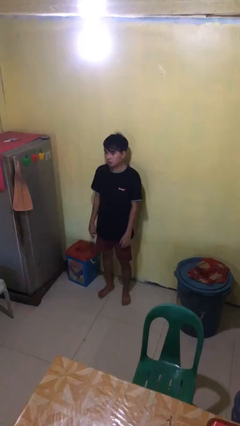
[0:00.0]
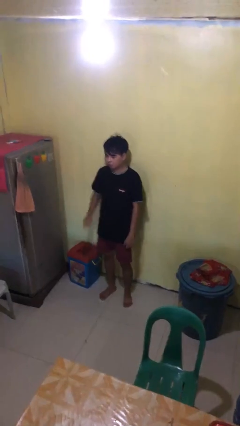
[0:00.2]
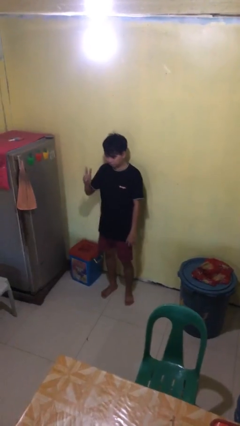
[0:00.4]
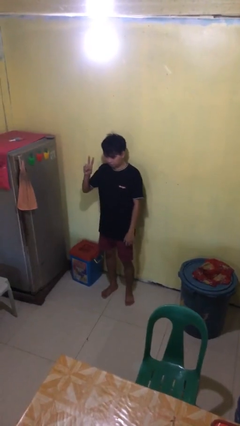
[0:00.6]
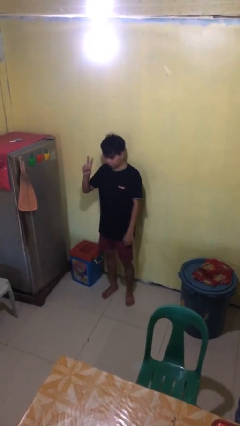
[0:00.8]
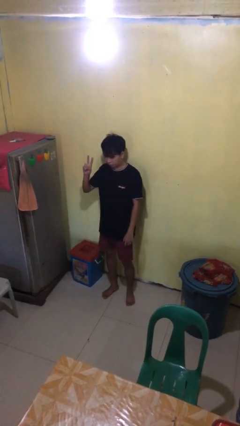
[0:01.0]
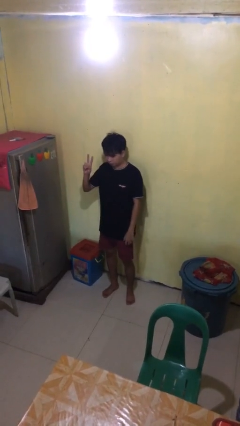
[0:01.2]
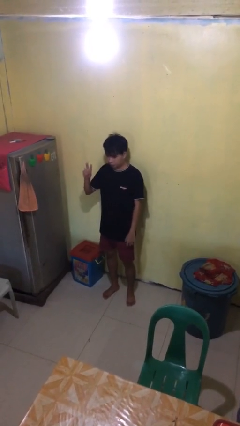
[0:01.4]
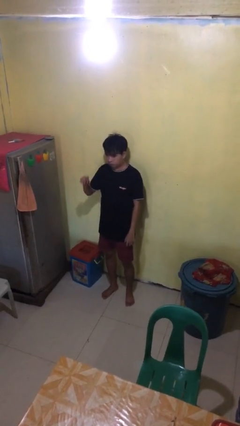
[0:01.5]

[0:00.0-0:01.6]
person gestures peace

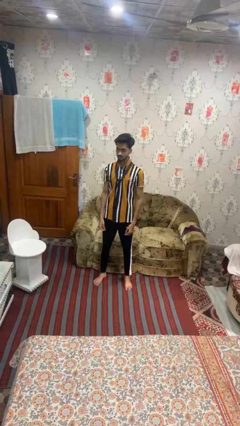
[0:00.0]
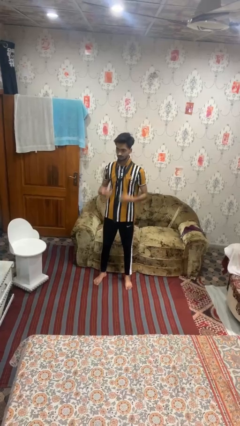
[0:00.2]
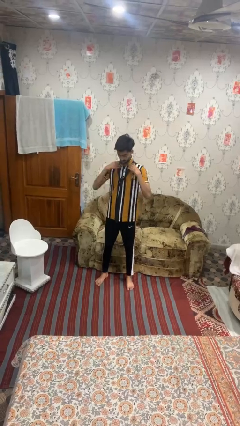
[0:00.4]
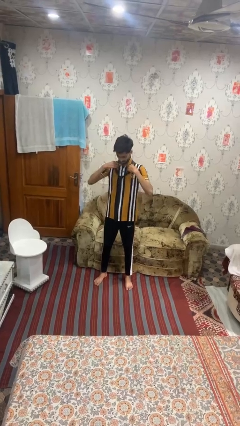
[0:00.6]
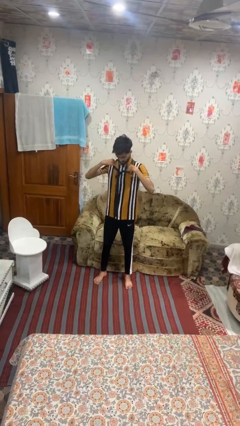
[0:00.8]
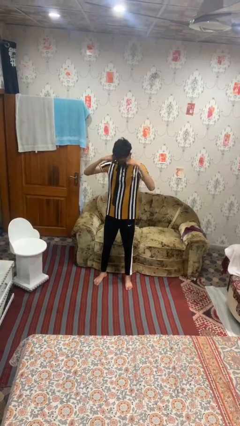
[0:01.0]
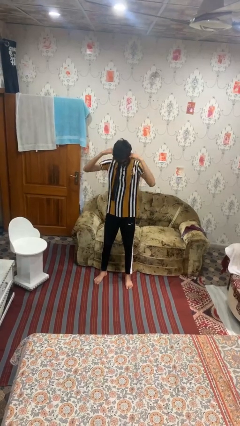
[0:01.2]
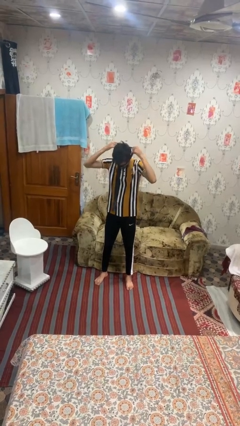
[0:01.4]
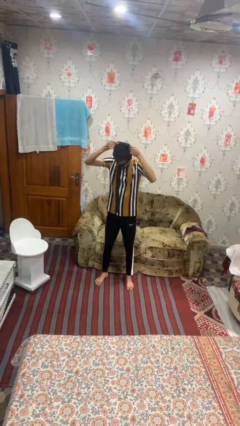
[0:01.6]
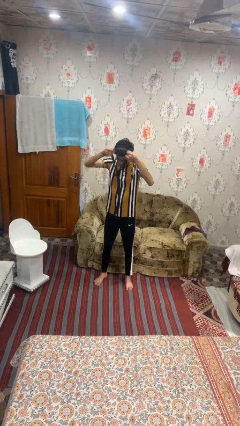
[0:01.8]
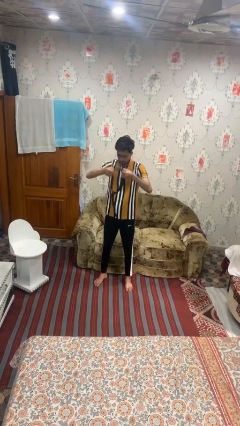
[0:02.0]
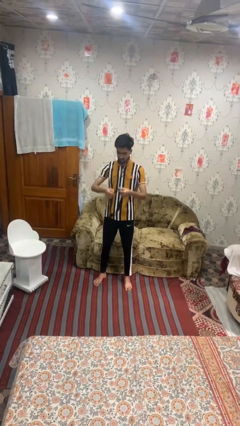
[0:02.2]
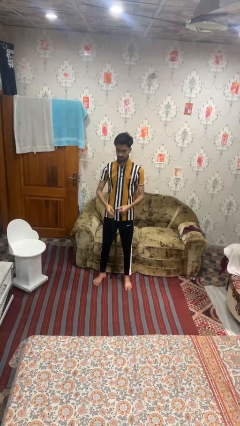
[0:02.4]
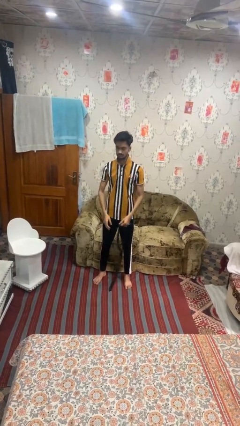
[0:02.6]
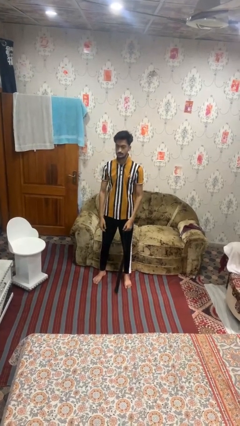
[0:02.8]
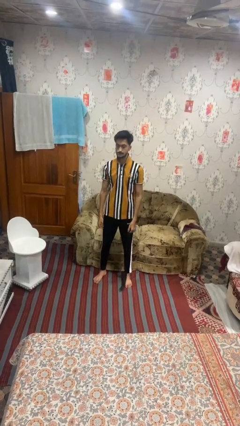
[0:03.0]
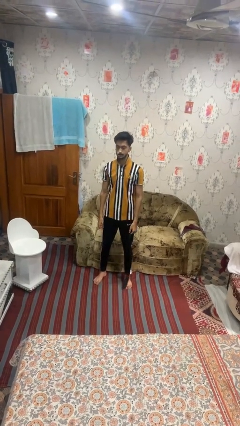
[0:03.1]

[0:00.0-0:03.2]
person takes off necktie

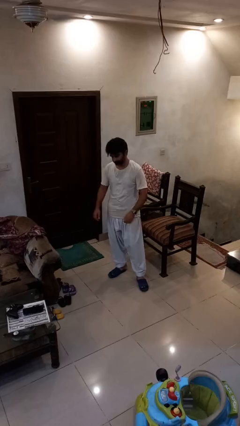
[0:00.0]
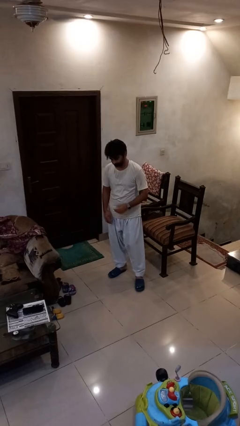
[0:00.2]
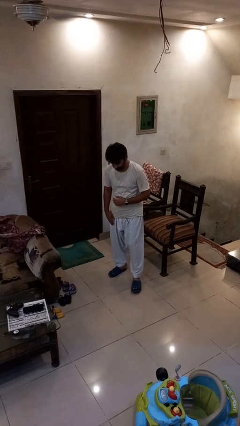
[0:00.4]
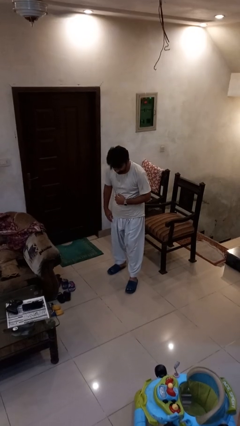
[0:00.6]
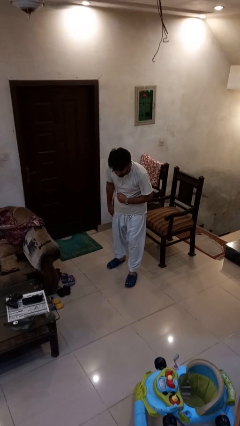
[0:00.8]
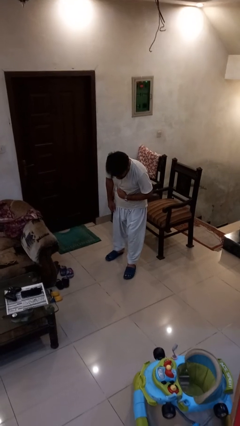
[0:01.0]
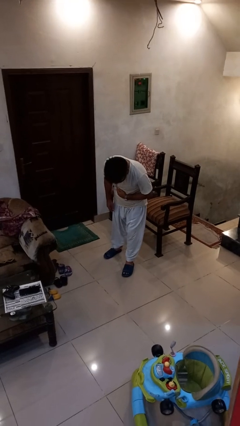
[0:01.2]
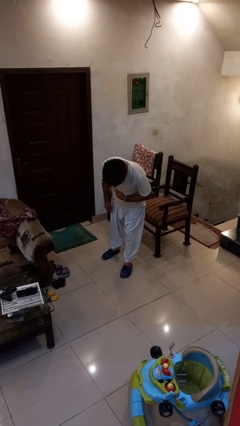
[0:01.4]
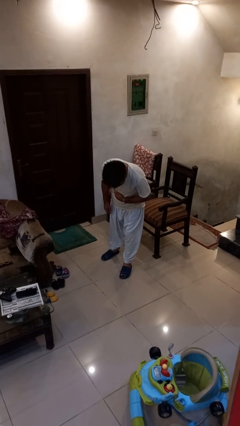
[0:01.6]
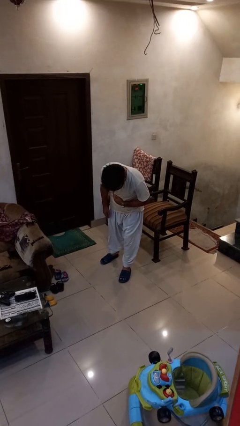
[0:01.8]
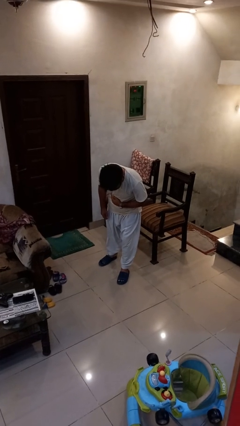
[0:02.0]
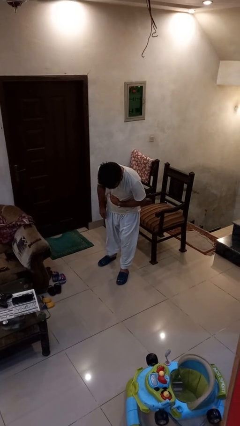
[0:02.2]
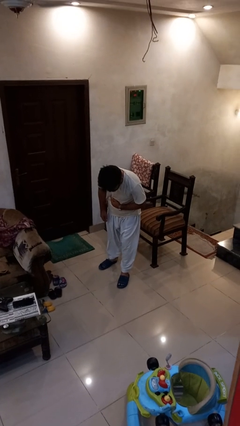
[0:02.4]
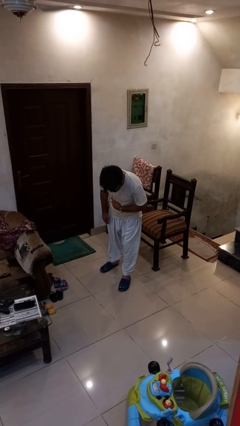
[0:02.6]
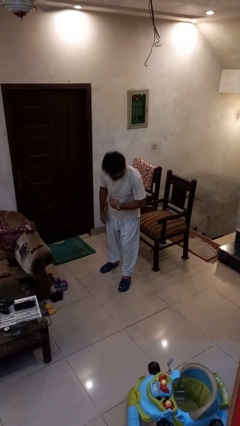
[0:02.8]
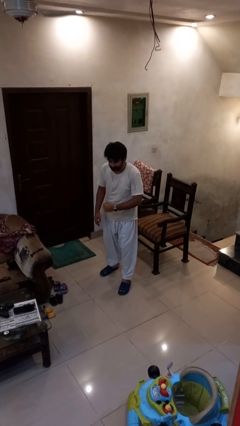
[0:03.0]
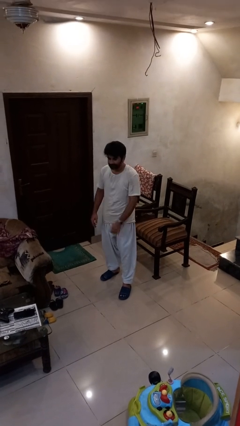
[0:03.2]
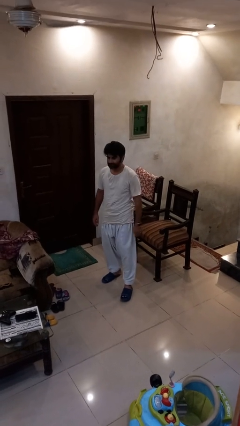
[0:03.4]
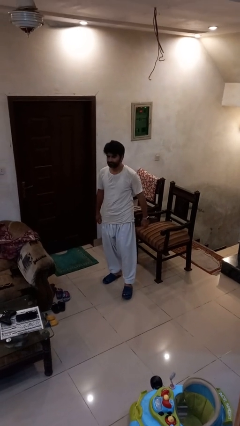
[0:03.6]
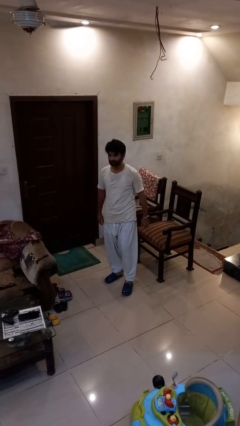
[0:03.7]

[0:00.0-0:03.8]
person bows

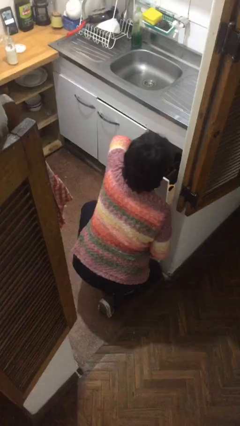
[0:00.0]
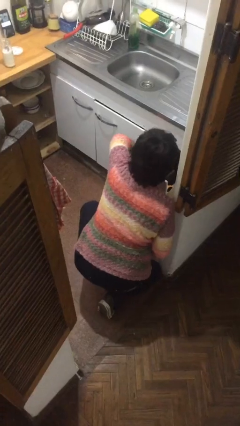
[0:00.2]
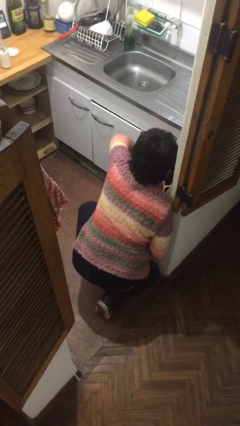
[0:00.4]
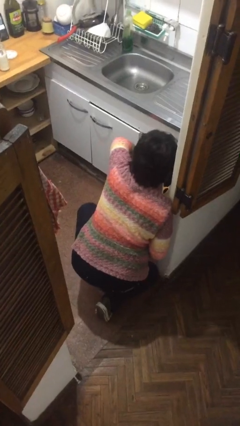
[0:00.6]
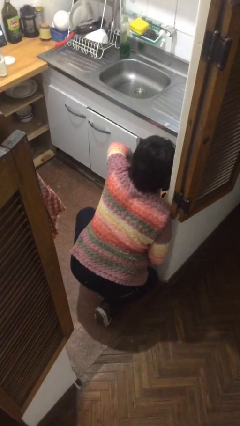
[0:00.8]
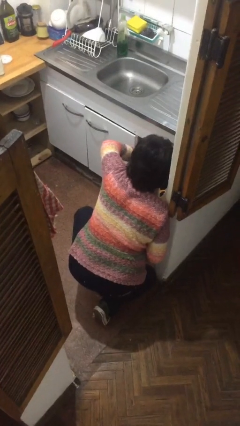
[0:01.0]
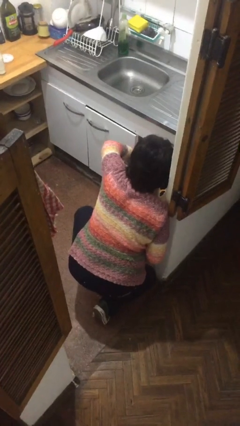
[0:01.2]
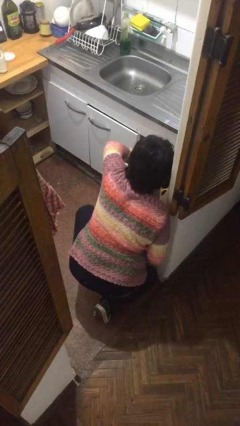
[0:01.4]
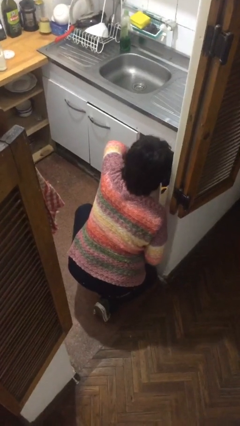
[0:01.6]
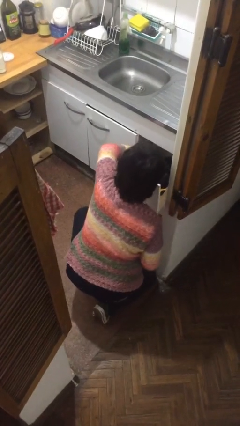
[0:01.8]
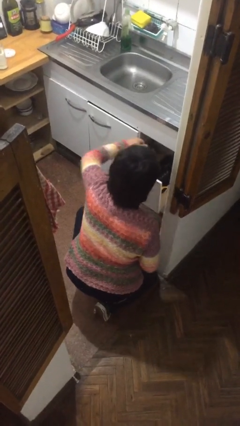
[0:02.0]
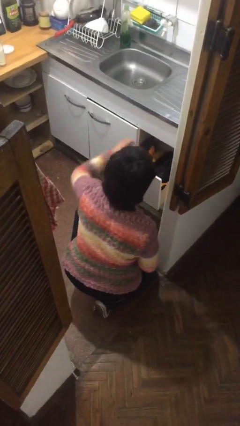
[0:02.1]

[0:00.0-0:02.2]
person searches in kitchen drawer

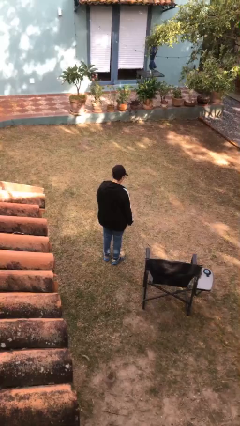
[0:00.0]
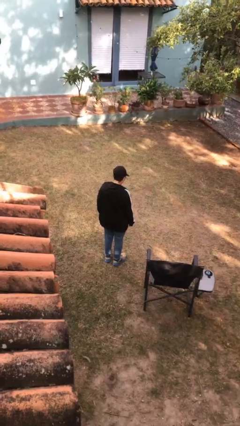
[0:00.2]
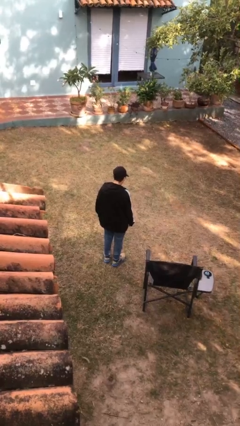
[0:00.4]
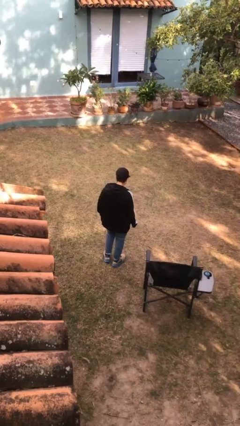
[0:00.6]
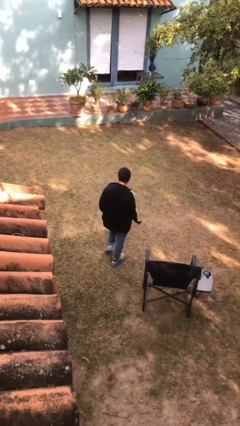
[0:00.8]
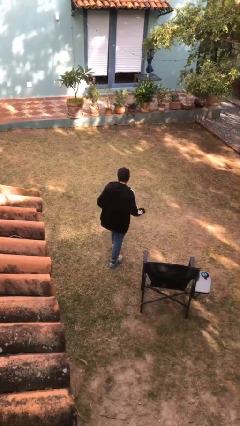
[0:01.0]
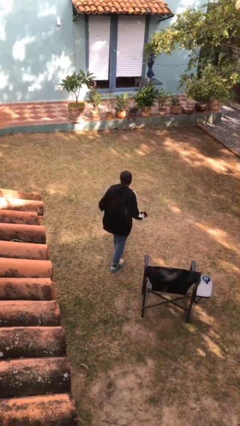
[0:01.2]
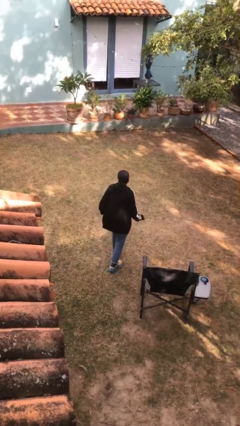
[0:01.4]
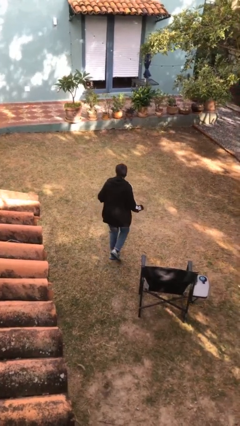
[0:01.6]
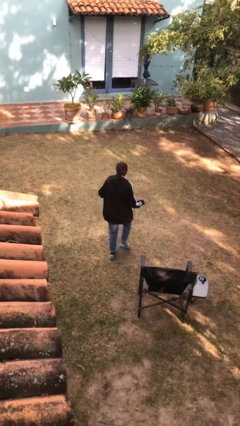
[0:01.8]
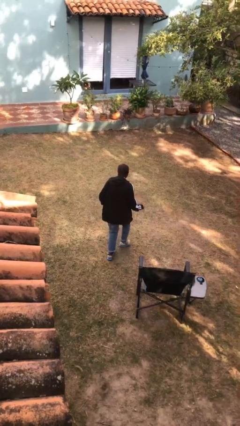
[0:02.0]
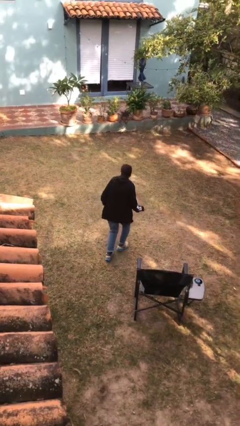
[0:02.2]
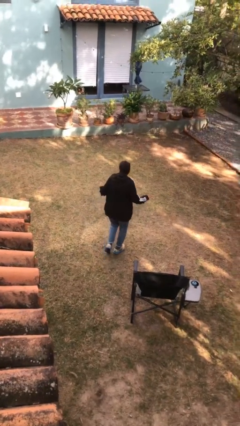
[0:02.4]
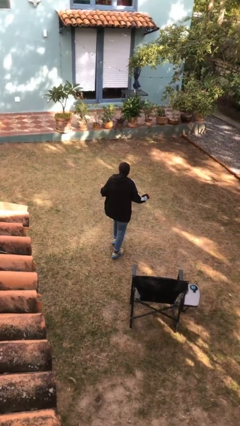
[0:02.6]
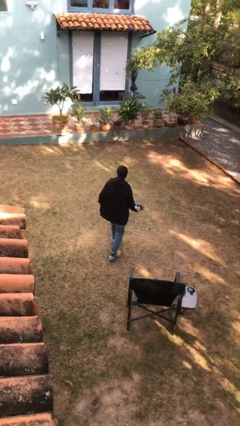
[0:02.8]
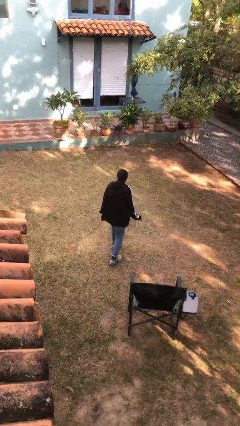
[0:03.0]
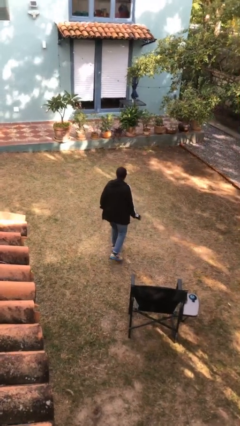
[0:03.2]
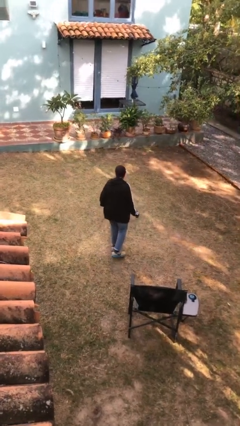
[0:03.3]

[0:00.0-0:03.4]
person walks tiptoe

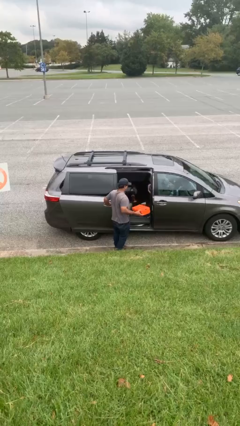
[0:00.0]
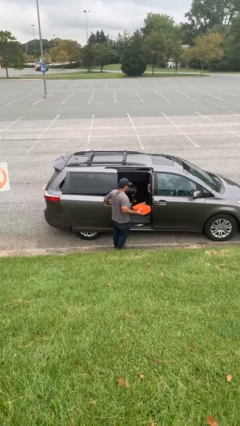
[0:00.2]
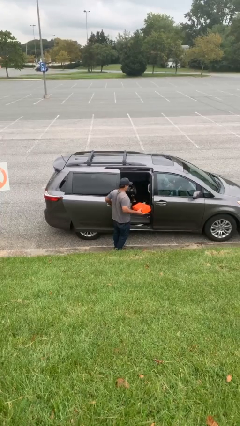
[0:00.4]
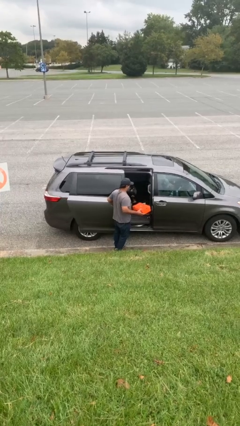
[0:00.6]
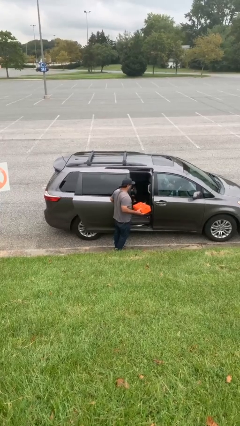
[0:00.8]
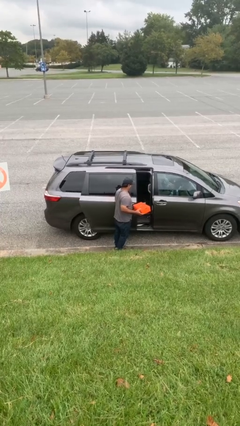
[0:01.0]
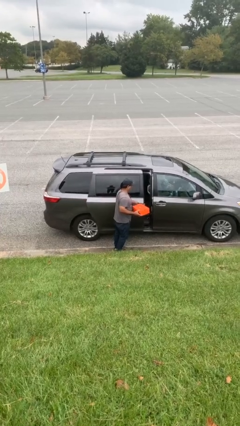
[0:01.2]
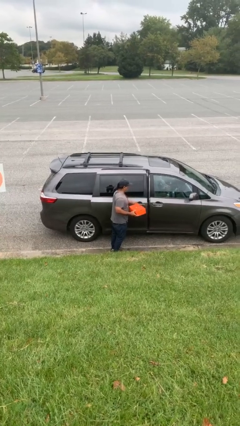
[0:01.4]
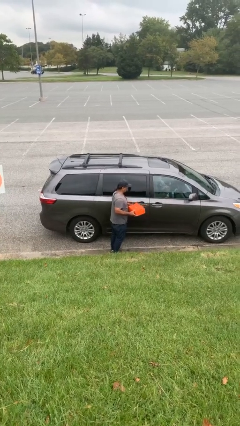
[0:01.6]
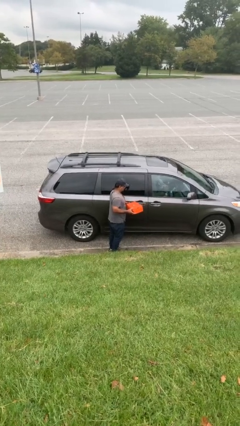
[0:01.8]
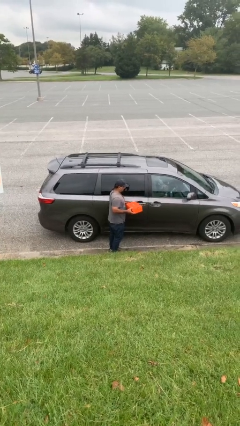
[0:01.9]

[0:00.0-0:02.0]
person closes car door

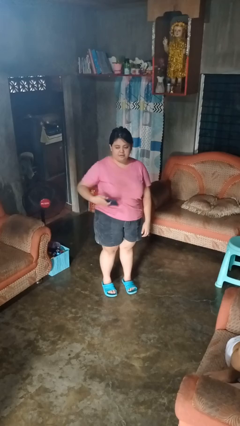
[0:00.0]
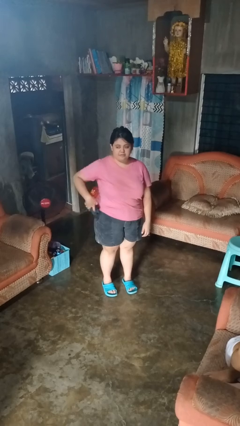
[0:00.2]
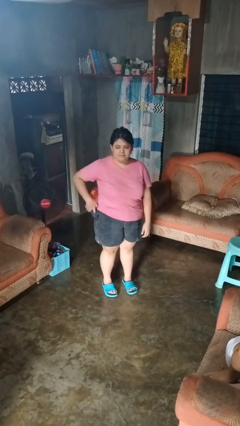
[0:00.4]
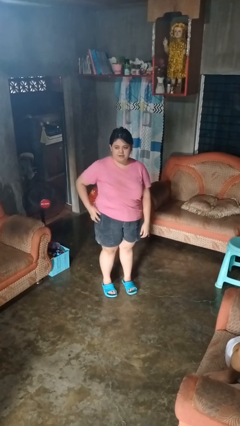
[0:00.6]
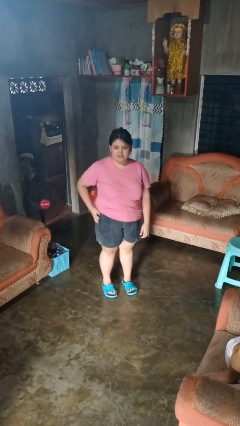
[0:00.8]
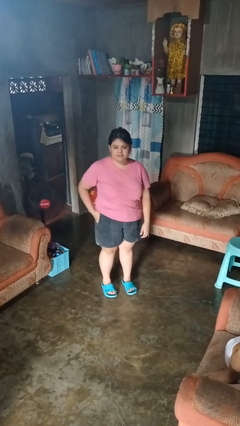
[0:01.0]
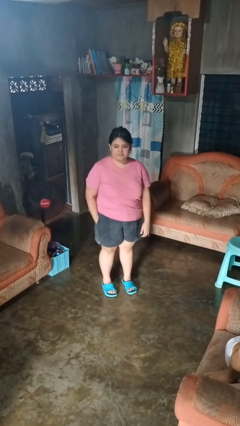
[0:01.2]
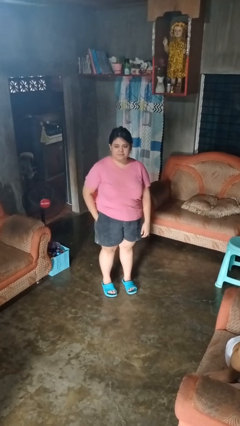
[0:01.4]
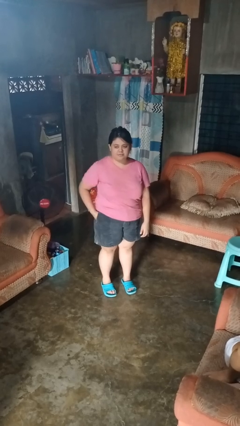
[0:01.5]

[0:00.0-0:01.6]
person puts phone into pocket
